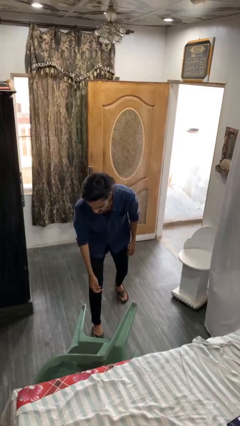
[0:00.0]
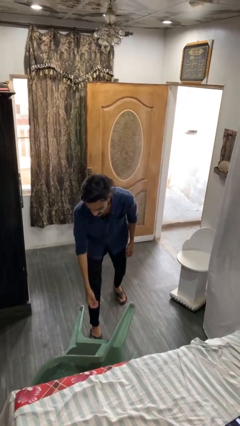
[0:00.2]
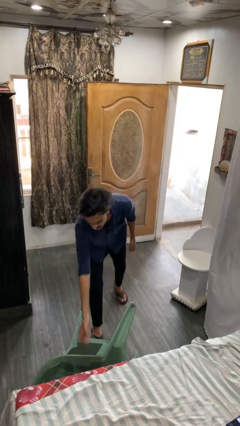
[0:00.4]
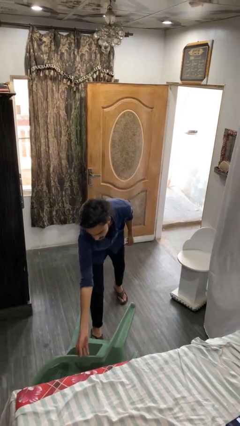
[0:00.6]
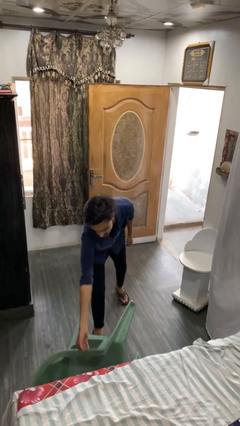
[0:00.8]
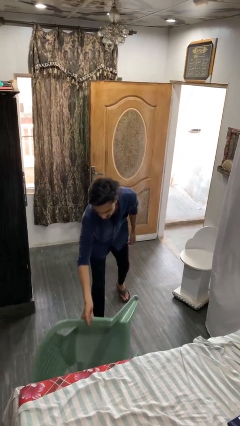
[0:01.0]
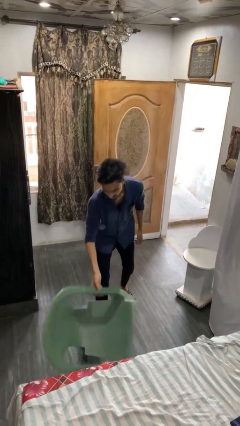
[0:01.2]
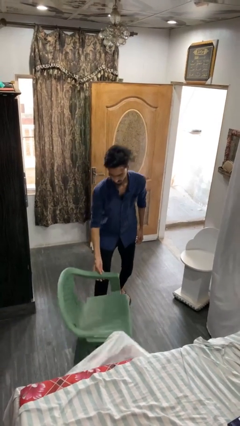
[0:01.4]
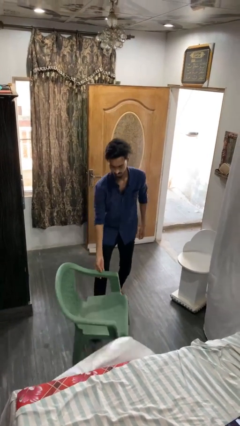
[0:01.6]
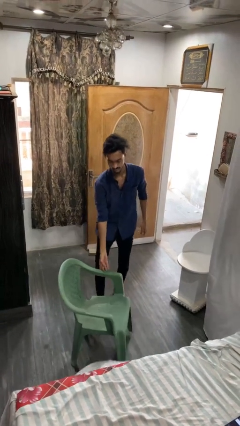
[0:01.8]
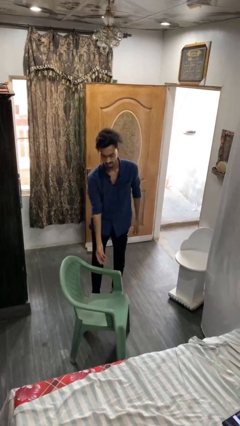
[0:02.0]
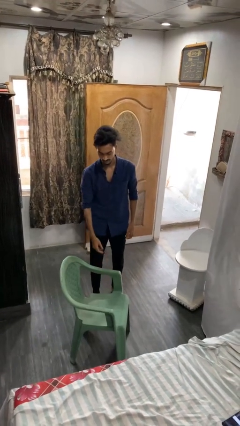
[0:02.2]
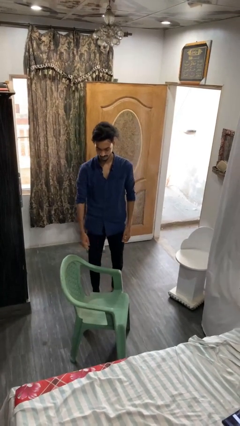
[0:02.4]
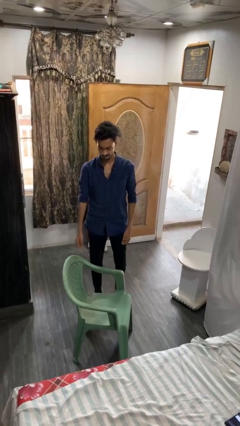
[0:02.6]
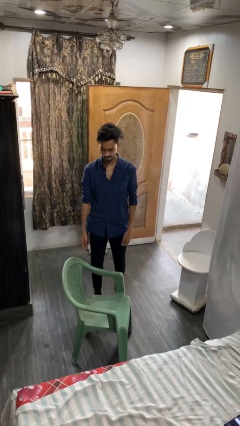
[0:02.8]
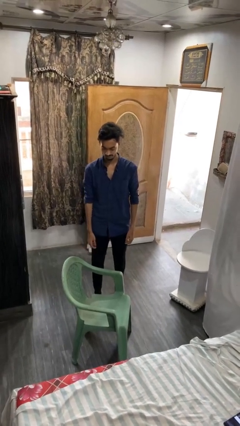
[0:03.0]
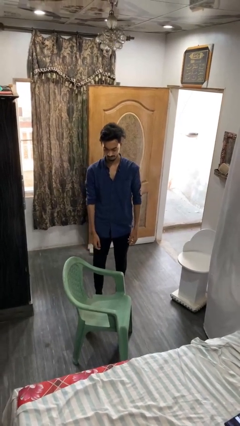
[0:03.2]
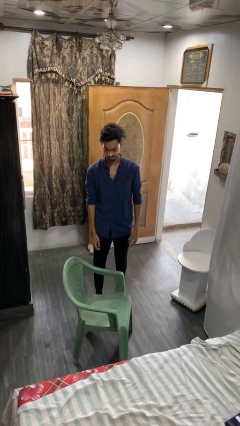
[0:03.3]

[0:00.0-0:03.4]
person sets upright furniture

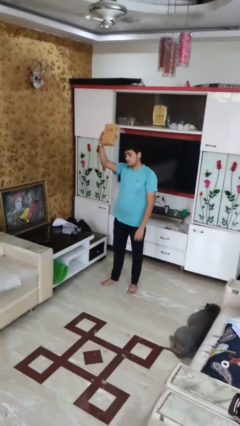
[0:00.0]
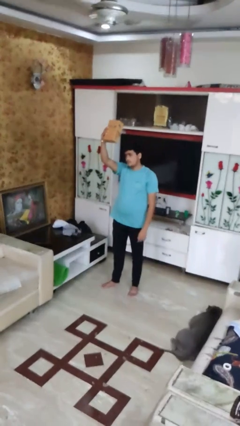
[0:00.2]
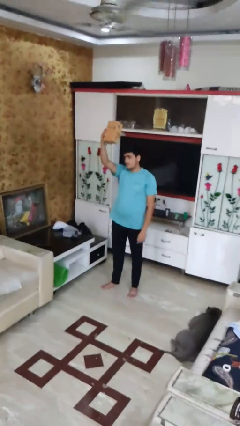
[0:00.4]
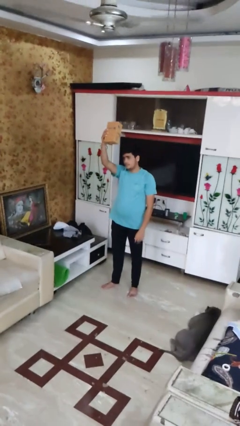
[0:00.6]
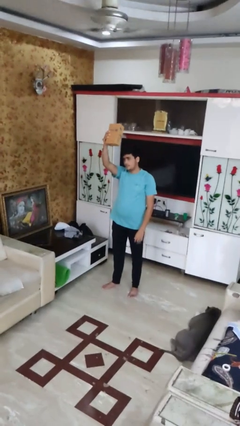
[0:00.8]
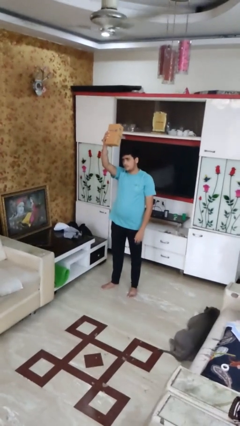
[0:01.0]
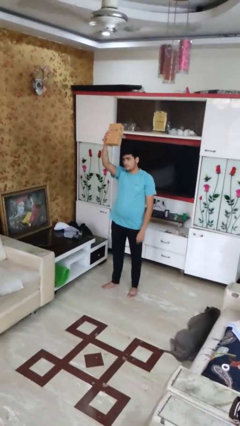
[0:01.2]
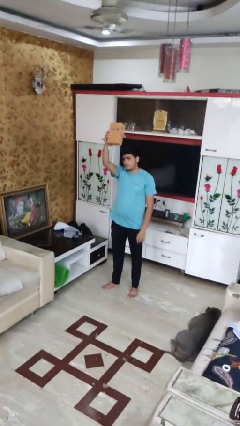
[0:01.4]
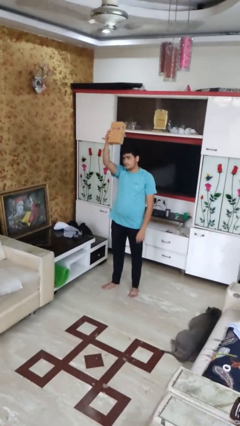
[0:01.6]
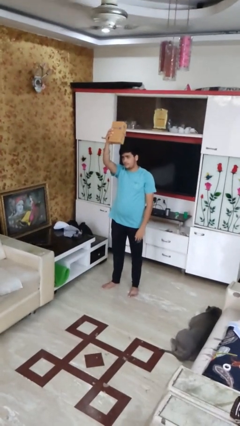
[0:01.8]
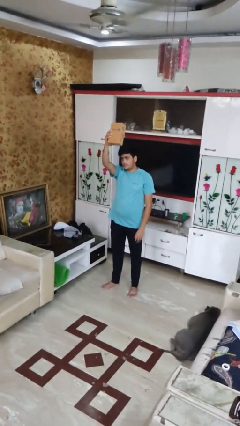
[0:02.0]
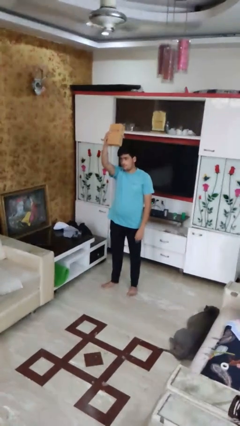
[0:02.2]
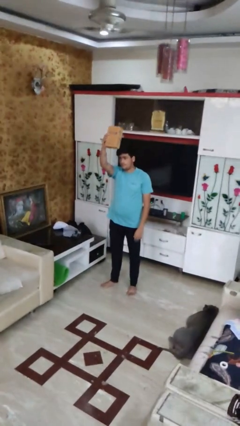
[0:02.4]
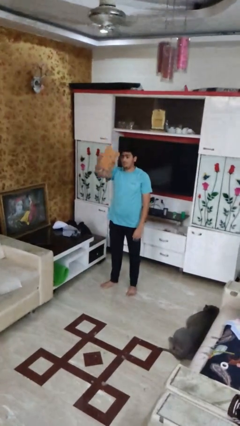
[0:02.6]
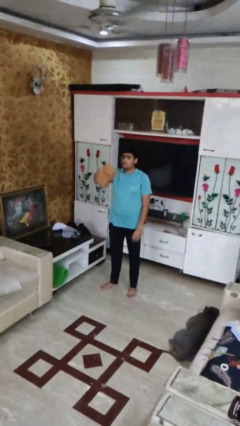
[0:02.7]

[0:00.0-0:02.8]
person holds object above head

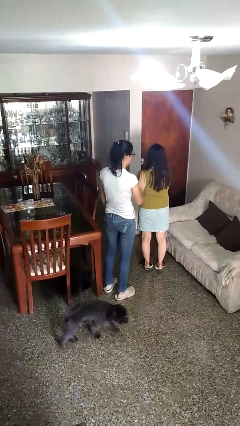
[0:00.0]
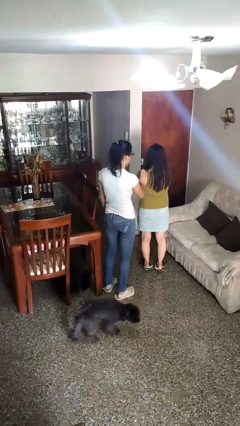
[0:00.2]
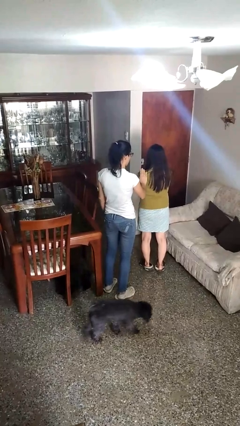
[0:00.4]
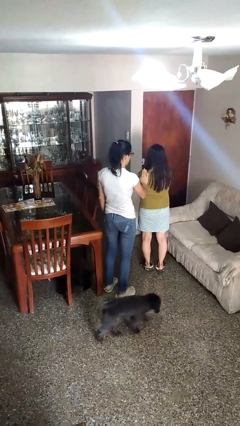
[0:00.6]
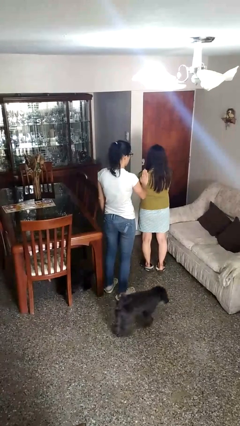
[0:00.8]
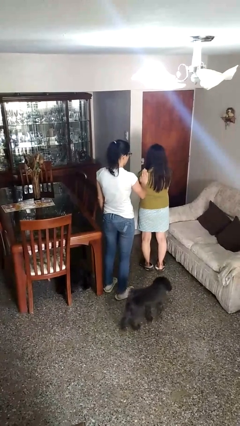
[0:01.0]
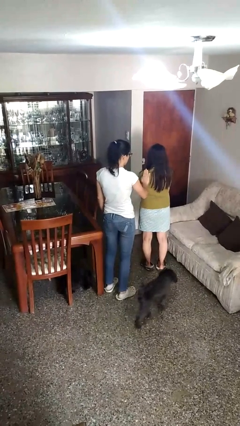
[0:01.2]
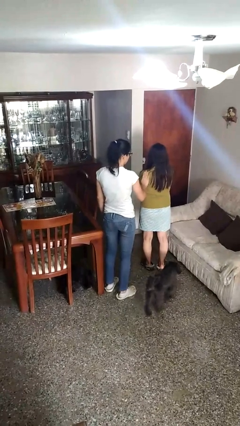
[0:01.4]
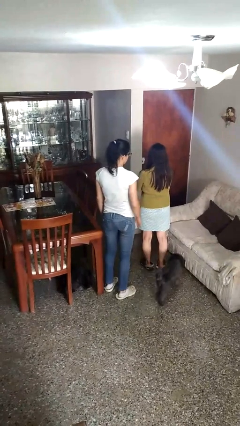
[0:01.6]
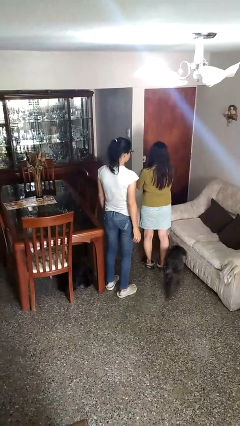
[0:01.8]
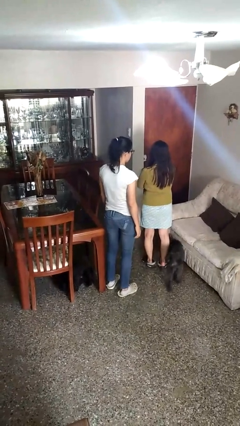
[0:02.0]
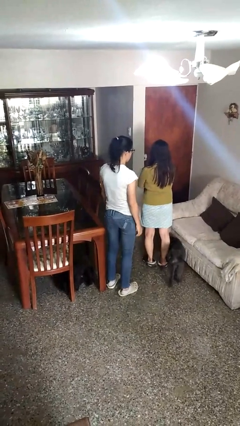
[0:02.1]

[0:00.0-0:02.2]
person touches back of person

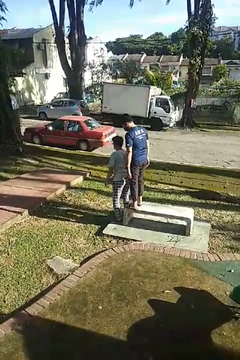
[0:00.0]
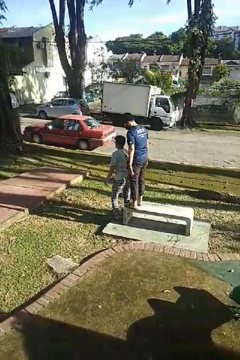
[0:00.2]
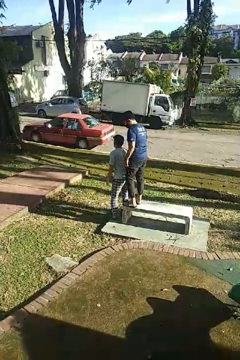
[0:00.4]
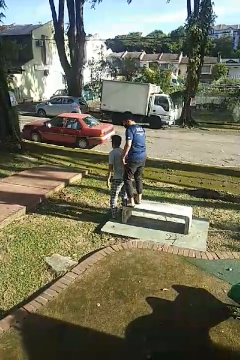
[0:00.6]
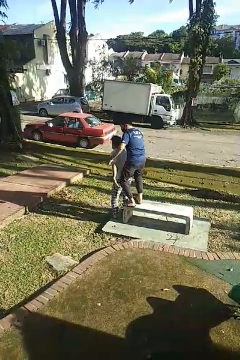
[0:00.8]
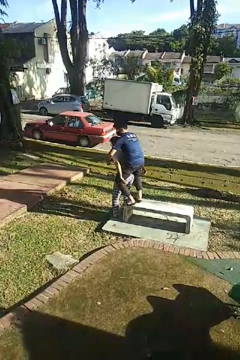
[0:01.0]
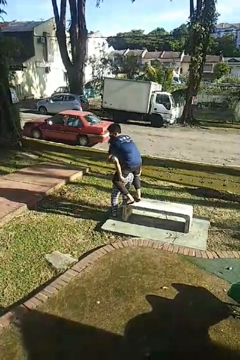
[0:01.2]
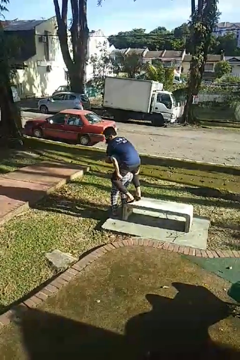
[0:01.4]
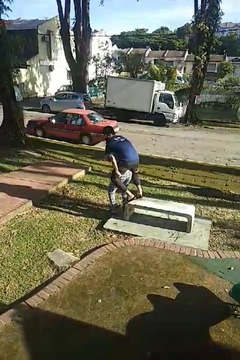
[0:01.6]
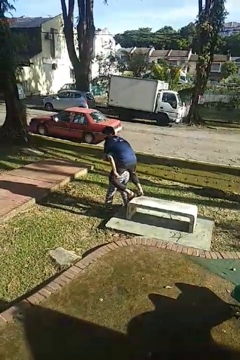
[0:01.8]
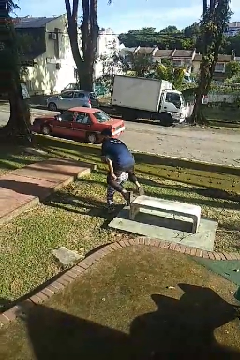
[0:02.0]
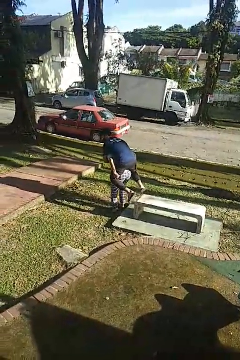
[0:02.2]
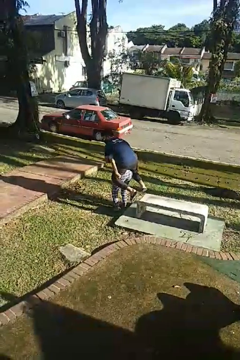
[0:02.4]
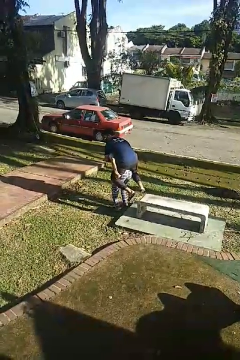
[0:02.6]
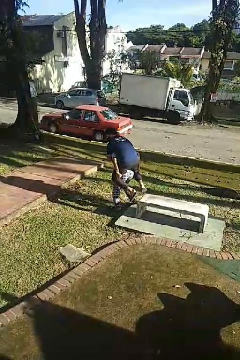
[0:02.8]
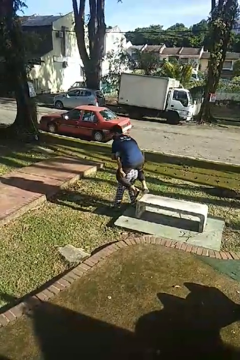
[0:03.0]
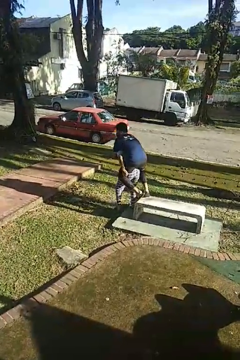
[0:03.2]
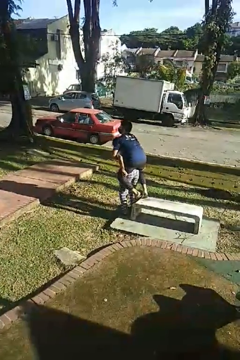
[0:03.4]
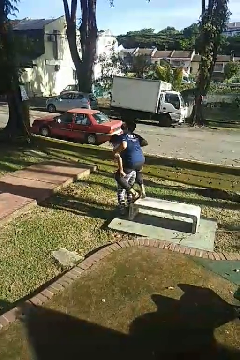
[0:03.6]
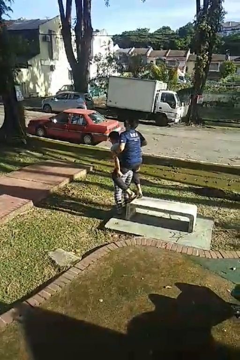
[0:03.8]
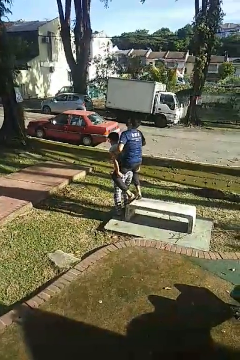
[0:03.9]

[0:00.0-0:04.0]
person carries person on back

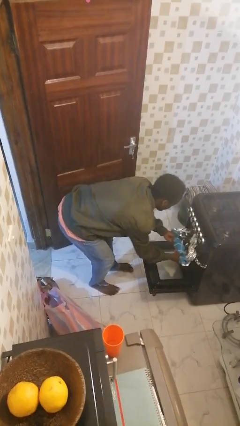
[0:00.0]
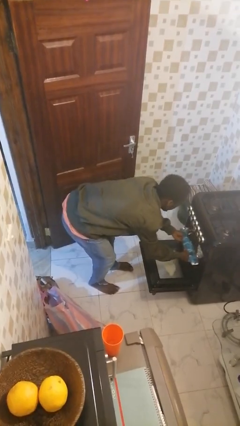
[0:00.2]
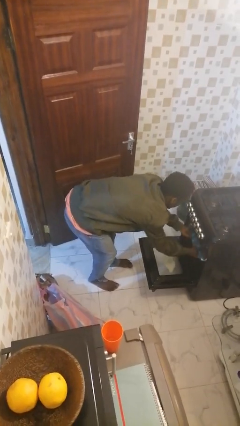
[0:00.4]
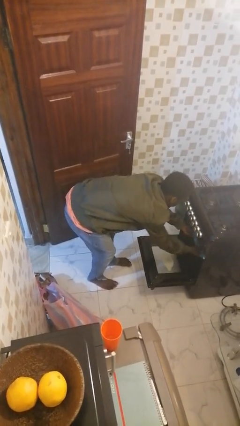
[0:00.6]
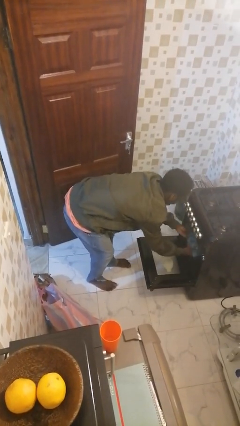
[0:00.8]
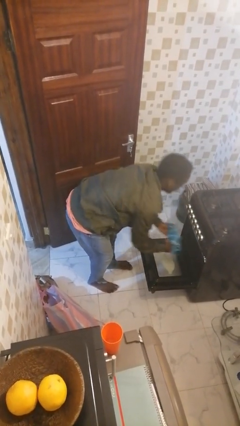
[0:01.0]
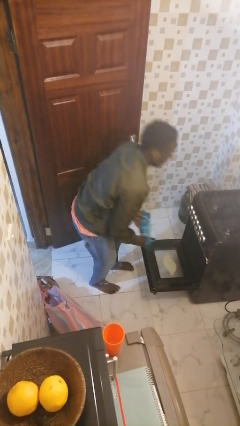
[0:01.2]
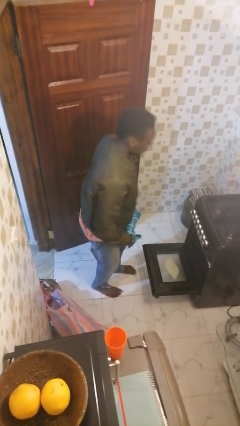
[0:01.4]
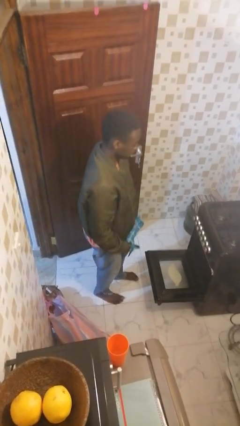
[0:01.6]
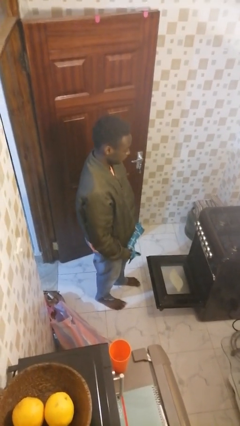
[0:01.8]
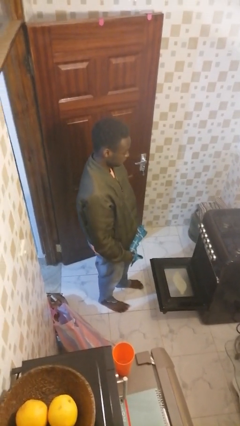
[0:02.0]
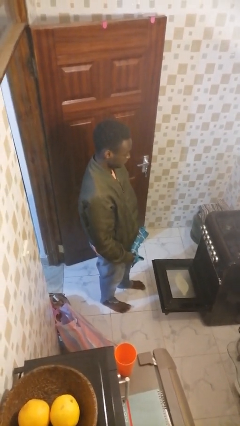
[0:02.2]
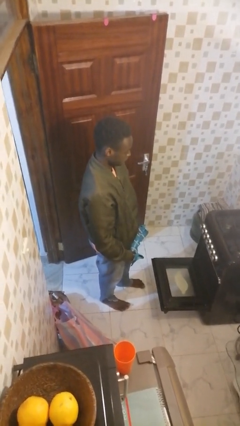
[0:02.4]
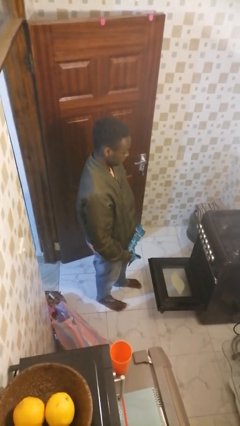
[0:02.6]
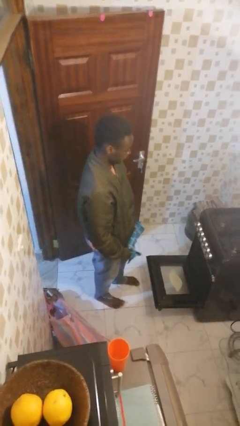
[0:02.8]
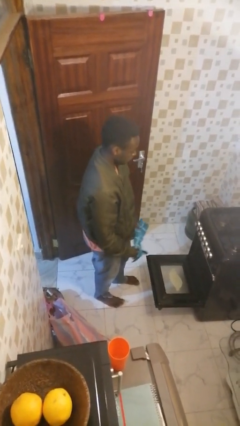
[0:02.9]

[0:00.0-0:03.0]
person puts object into oven

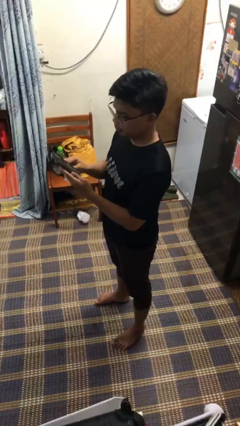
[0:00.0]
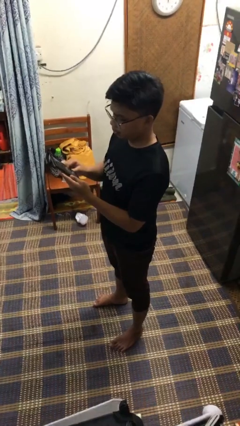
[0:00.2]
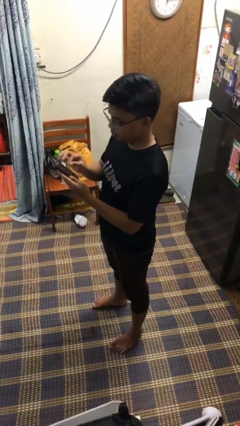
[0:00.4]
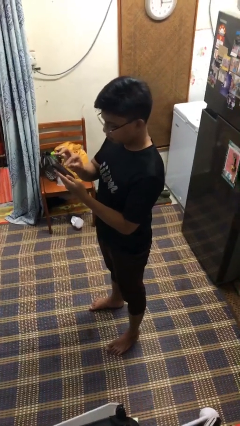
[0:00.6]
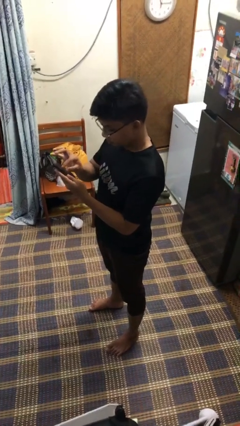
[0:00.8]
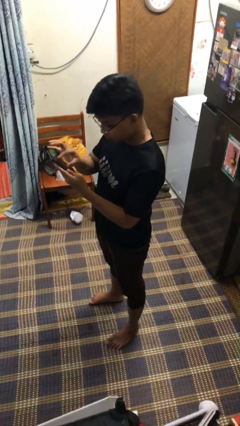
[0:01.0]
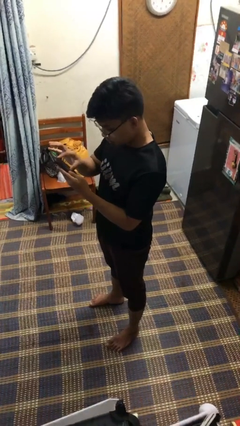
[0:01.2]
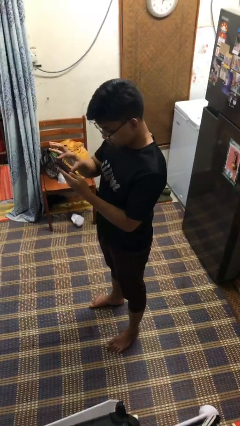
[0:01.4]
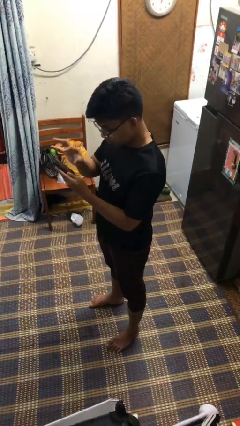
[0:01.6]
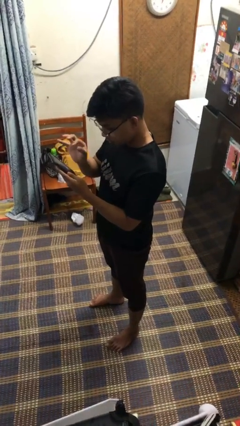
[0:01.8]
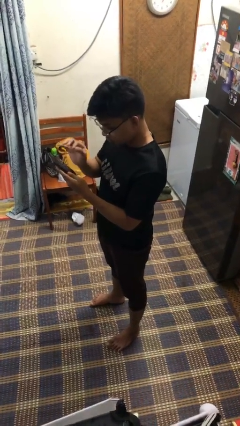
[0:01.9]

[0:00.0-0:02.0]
person gestures zoom in

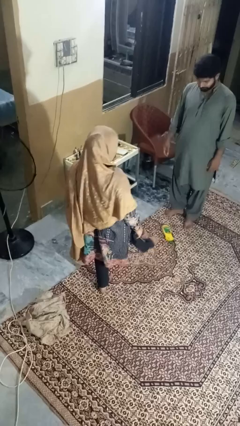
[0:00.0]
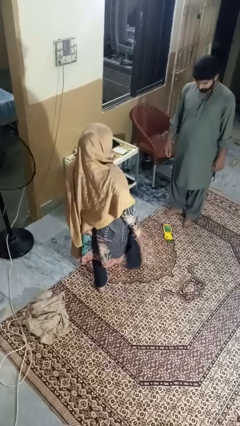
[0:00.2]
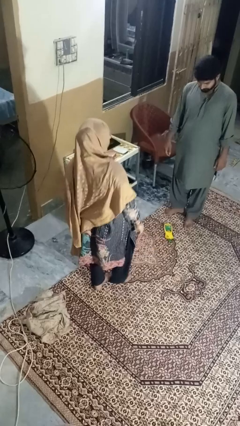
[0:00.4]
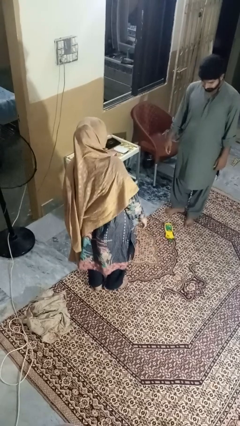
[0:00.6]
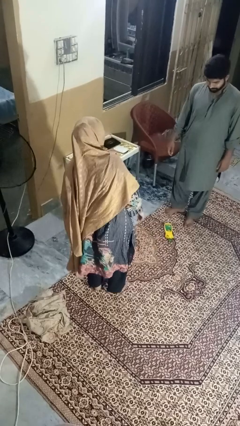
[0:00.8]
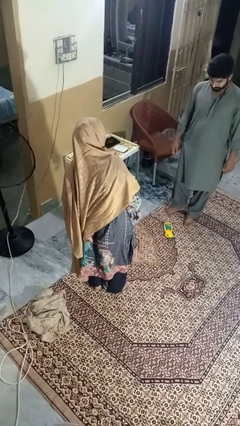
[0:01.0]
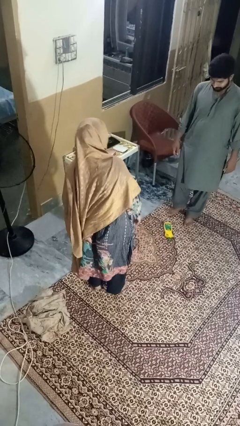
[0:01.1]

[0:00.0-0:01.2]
person kicks object to person
